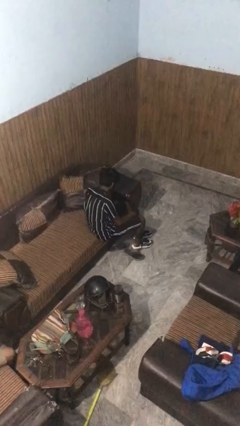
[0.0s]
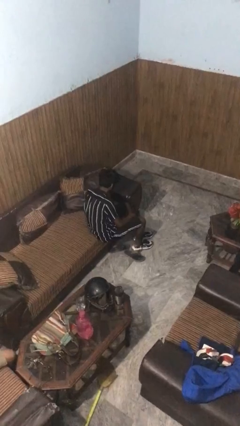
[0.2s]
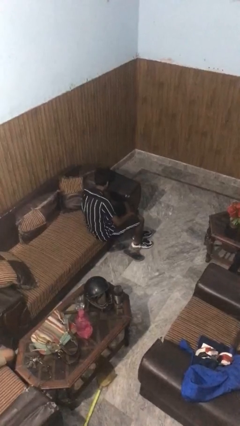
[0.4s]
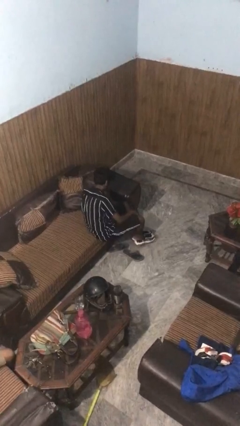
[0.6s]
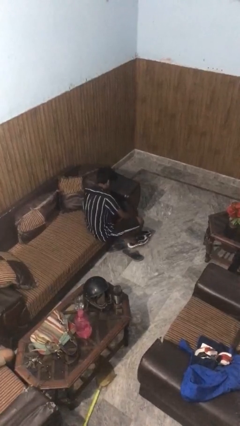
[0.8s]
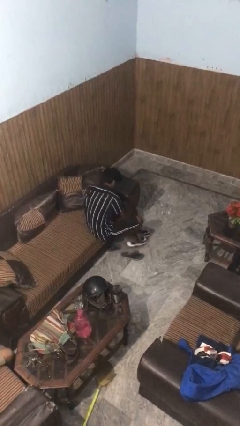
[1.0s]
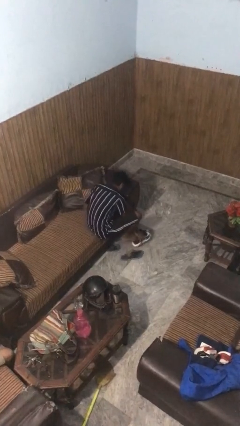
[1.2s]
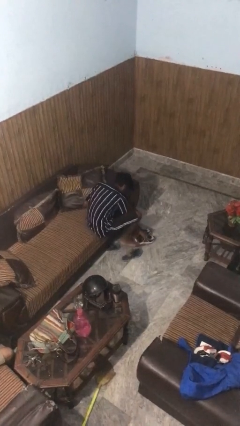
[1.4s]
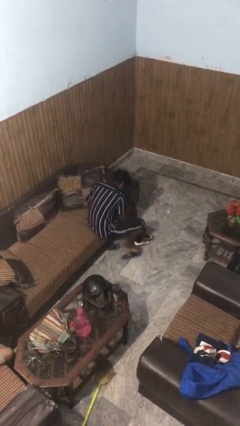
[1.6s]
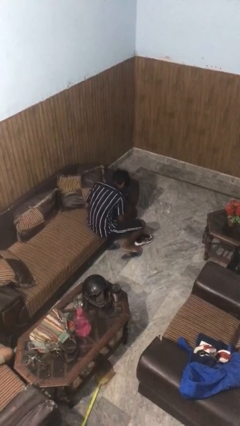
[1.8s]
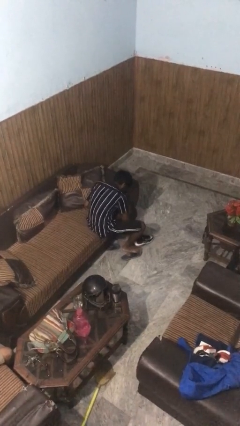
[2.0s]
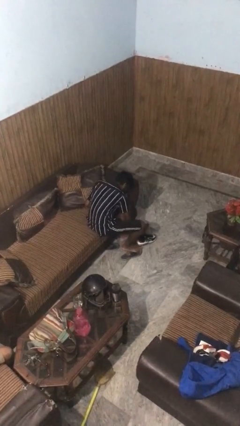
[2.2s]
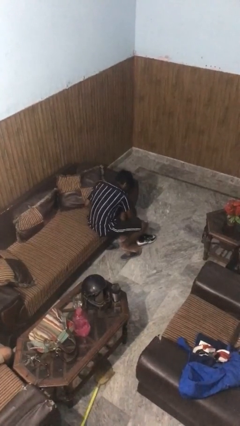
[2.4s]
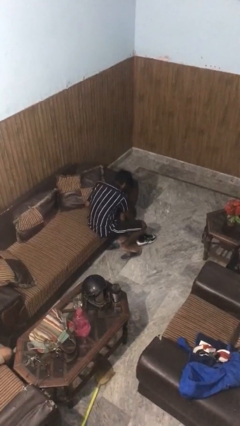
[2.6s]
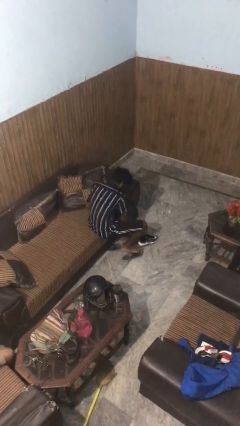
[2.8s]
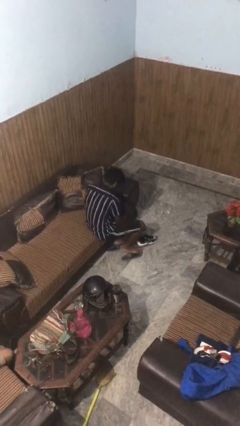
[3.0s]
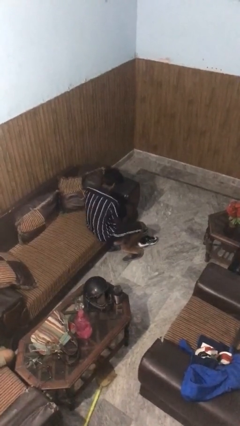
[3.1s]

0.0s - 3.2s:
person takes off shoes

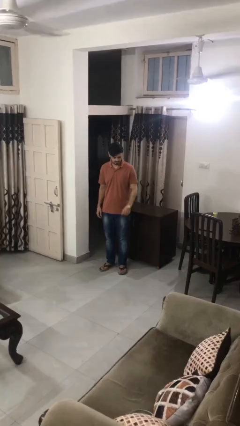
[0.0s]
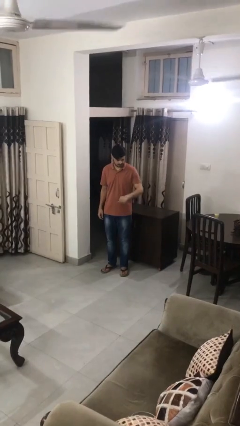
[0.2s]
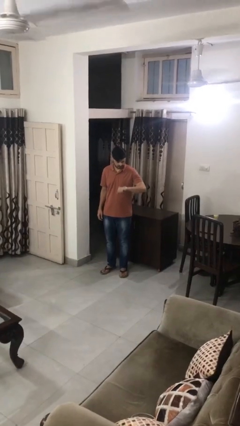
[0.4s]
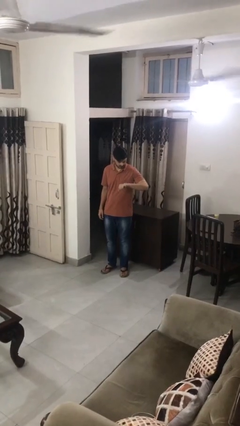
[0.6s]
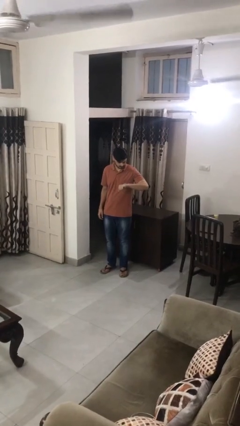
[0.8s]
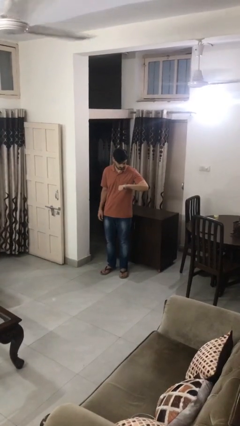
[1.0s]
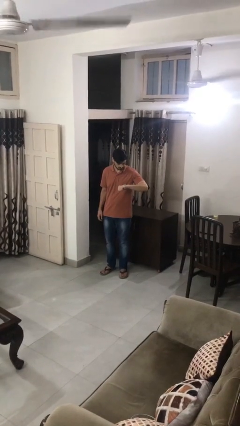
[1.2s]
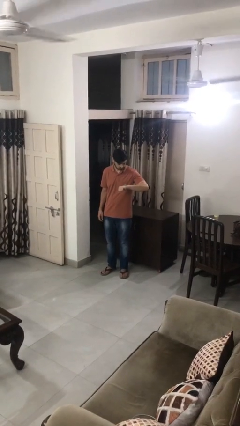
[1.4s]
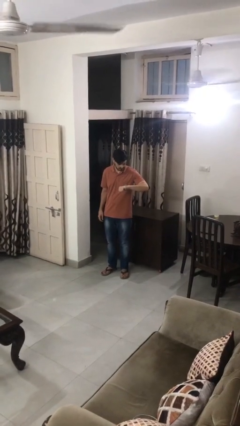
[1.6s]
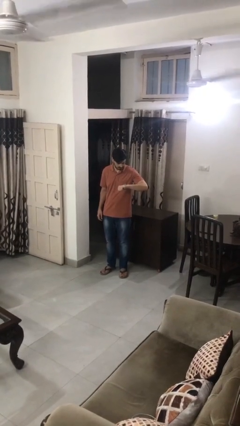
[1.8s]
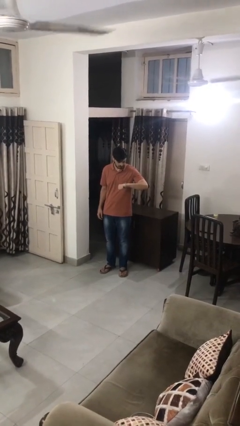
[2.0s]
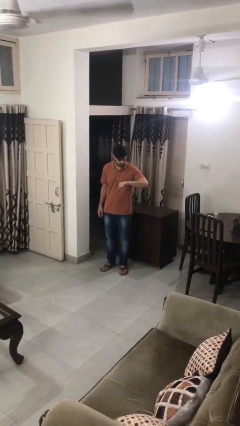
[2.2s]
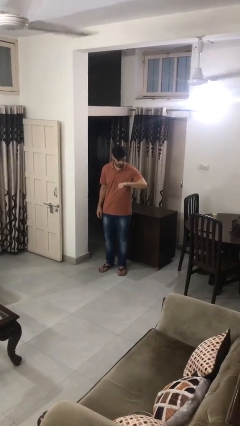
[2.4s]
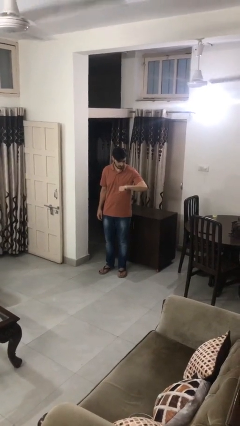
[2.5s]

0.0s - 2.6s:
person looks at wristwatch

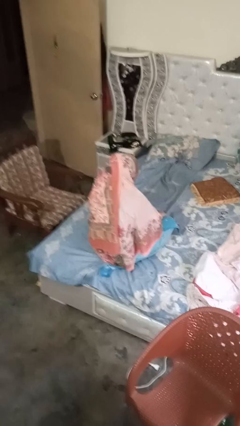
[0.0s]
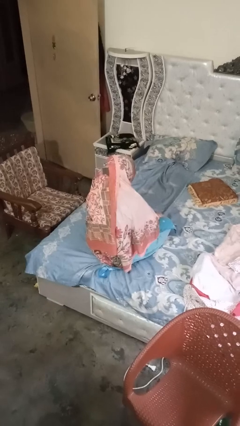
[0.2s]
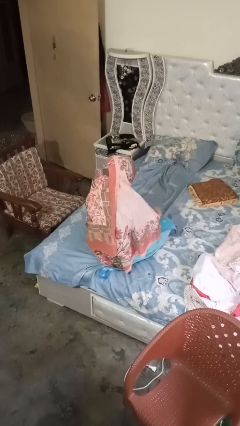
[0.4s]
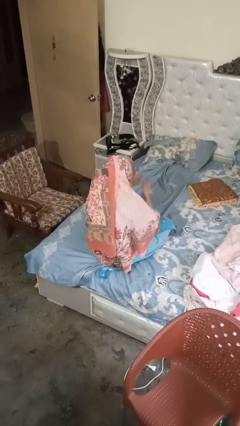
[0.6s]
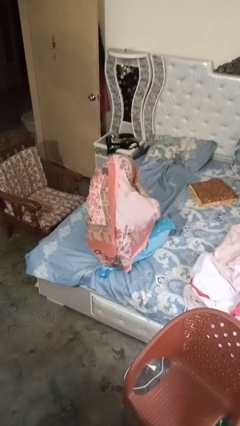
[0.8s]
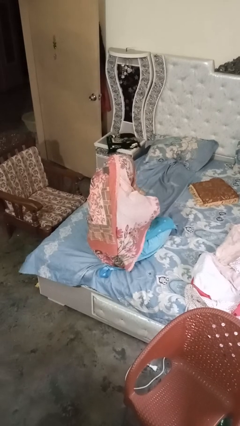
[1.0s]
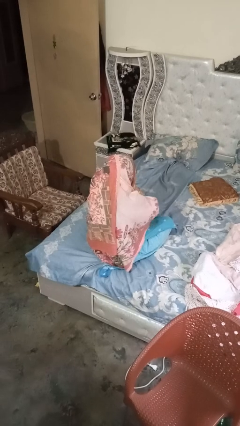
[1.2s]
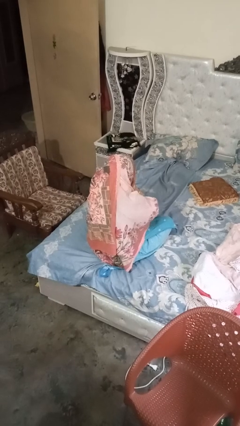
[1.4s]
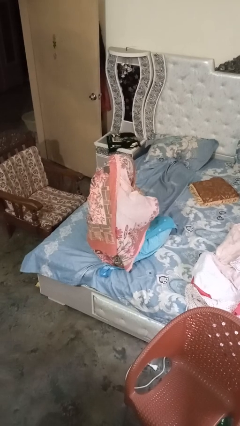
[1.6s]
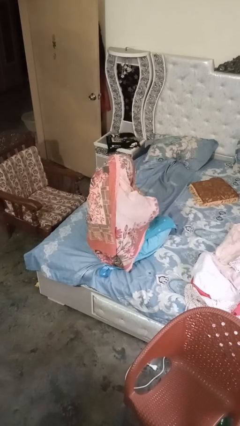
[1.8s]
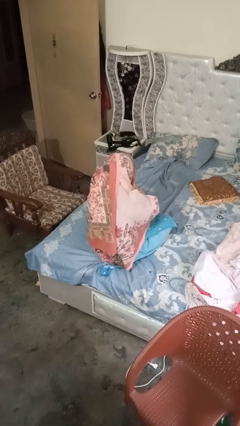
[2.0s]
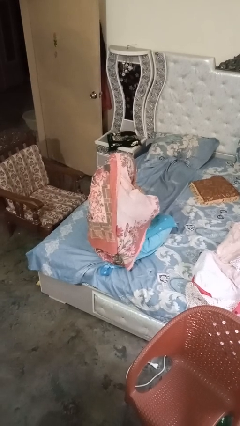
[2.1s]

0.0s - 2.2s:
person covers face with hands

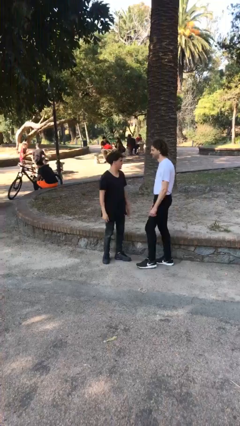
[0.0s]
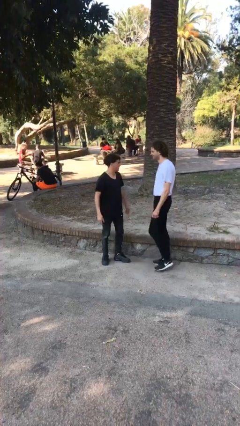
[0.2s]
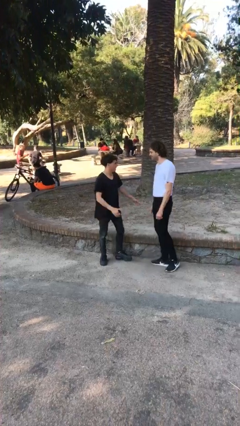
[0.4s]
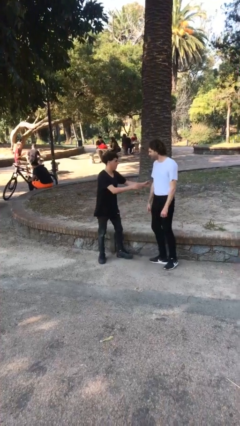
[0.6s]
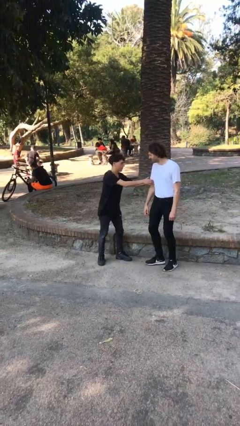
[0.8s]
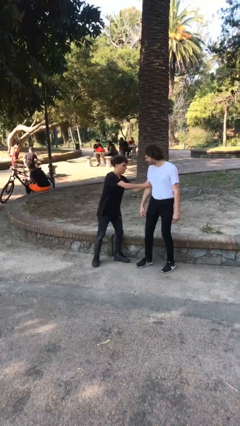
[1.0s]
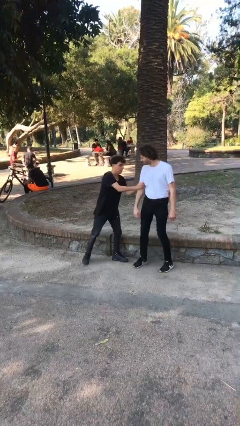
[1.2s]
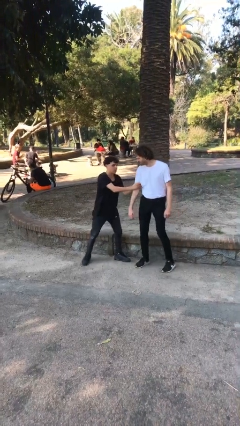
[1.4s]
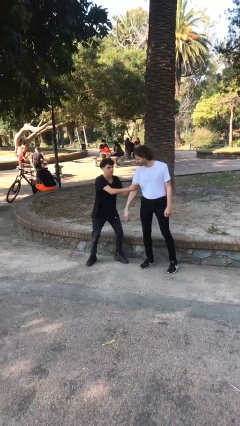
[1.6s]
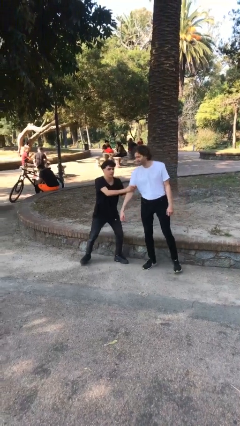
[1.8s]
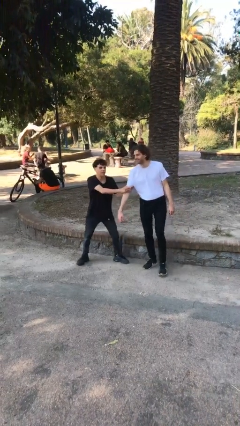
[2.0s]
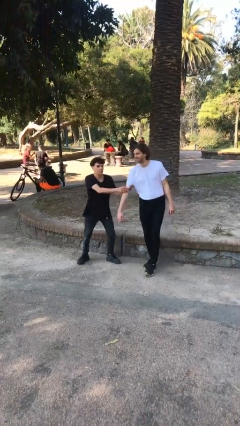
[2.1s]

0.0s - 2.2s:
person grabs person by bicep

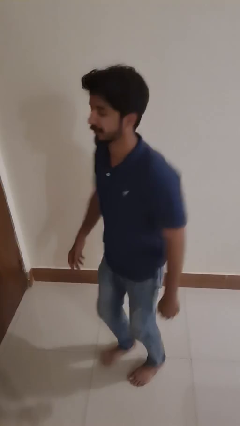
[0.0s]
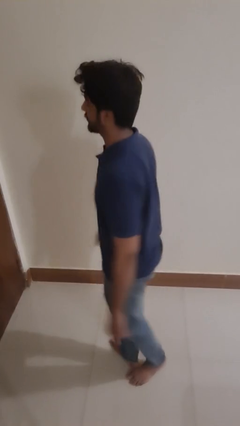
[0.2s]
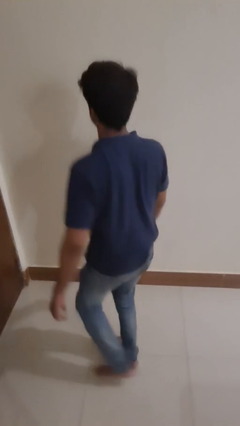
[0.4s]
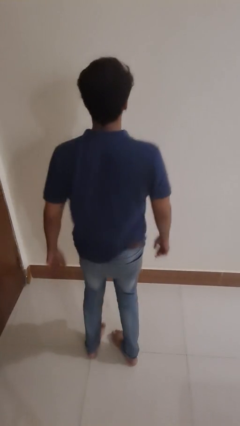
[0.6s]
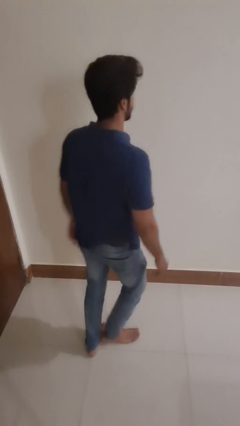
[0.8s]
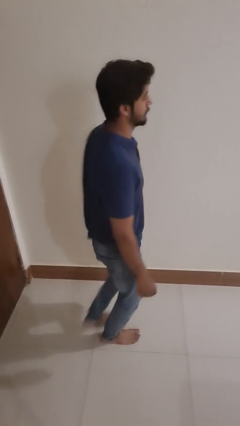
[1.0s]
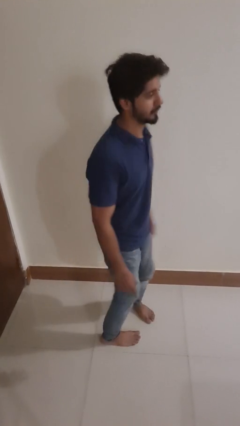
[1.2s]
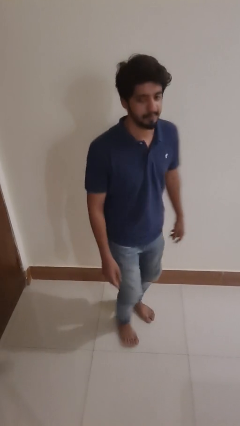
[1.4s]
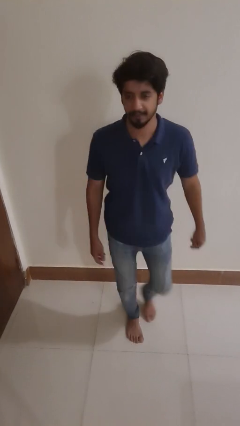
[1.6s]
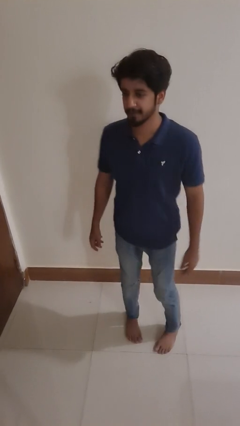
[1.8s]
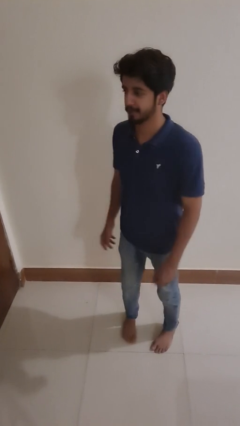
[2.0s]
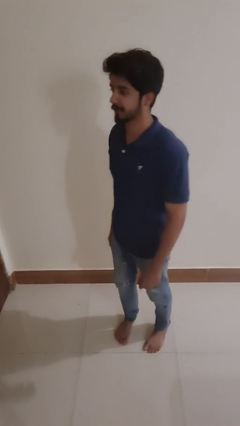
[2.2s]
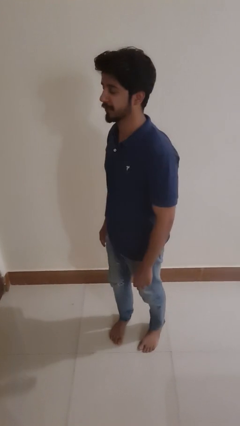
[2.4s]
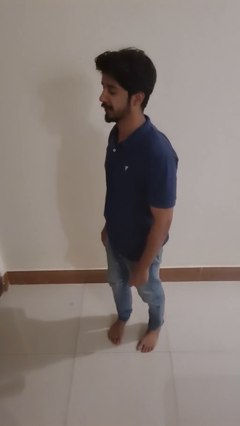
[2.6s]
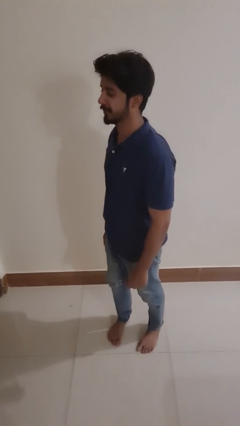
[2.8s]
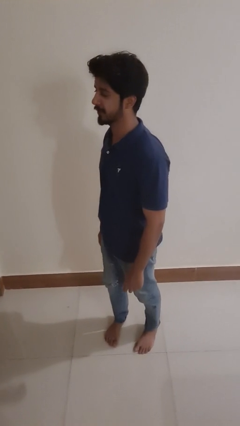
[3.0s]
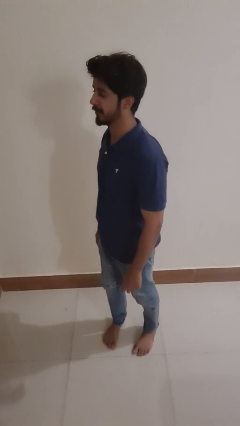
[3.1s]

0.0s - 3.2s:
person twirls

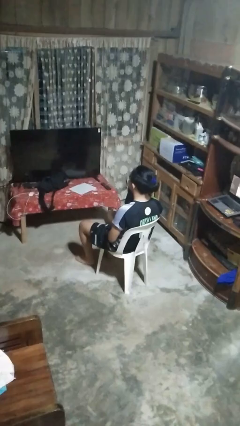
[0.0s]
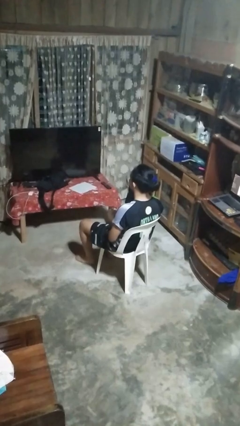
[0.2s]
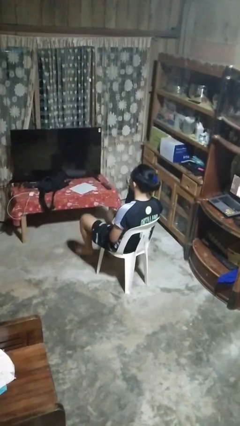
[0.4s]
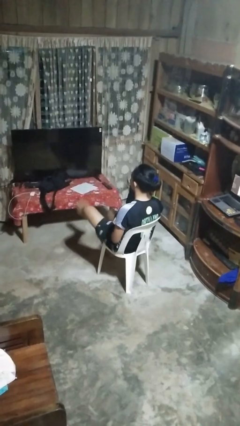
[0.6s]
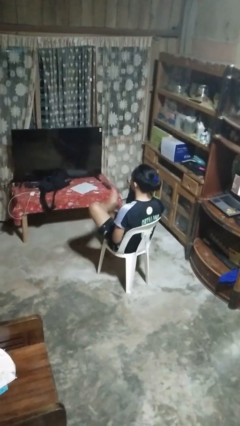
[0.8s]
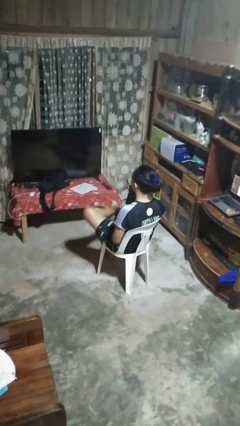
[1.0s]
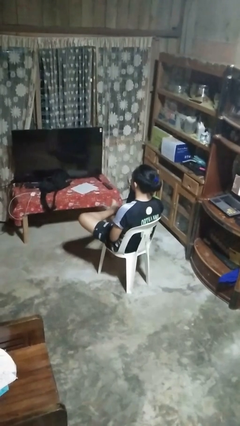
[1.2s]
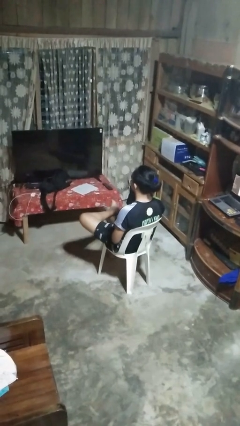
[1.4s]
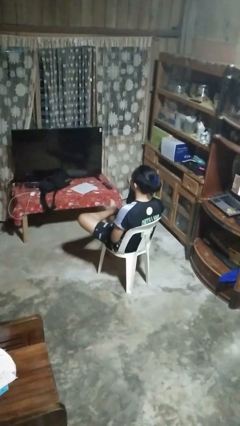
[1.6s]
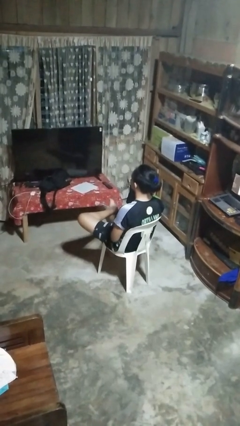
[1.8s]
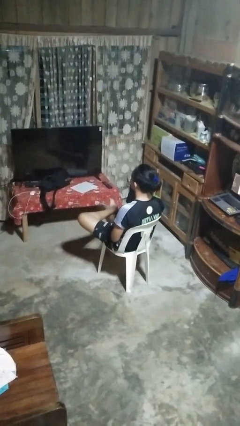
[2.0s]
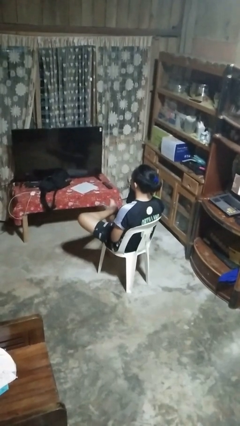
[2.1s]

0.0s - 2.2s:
person crosses legs

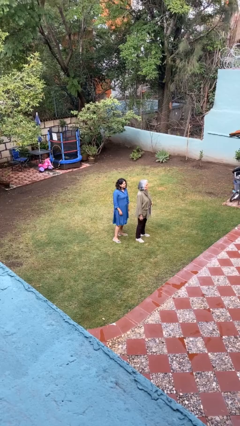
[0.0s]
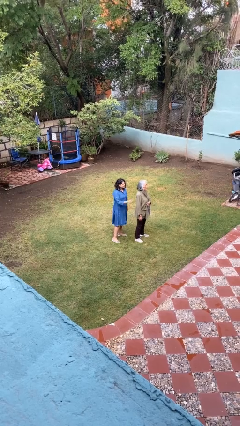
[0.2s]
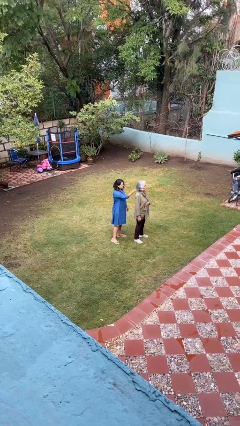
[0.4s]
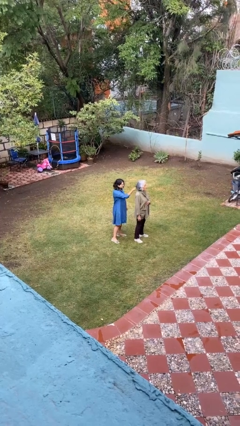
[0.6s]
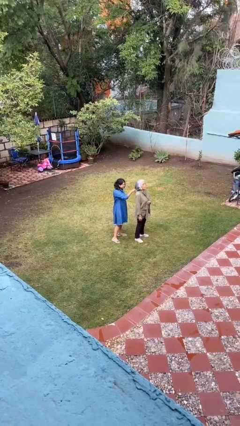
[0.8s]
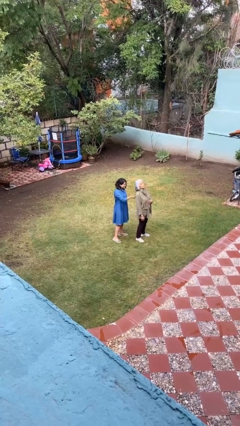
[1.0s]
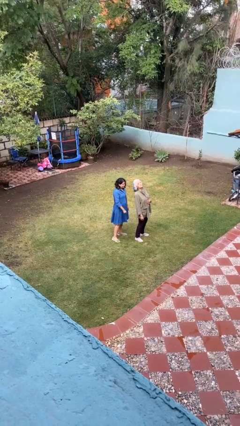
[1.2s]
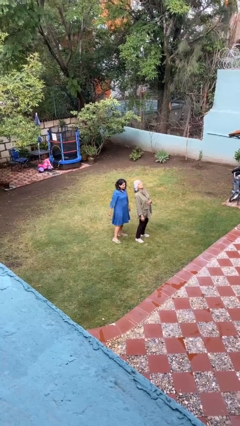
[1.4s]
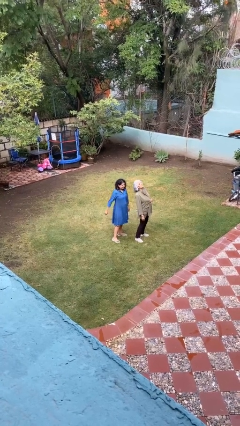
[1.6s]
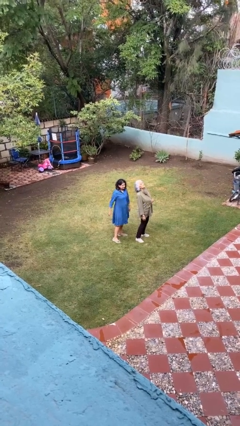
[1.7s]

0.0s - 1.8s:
person grabs person by hair
